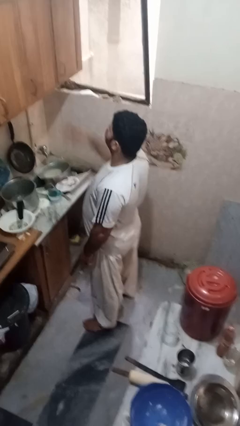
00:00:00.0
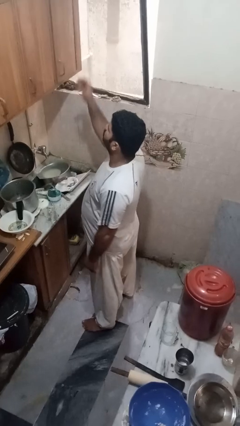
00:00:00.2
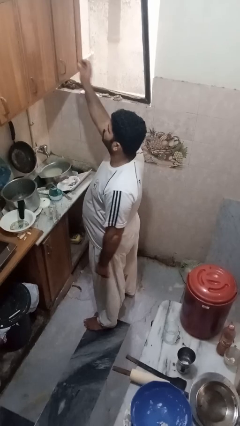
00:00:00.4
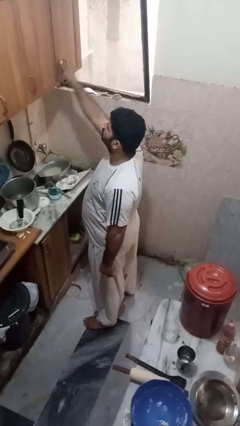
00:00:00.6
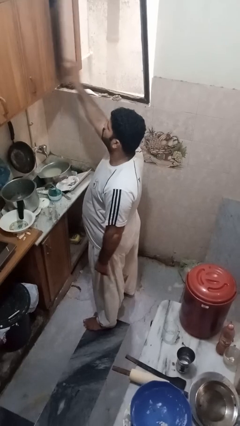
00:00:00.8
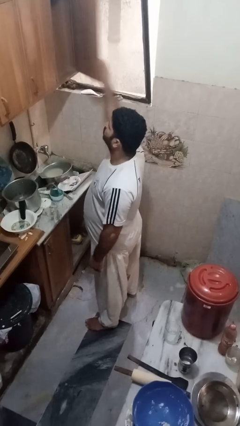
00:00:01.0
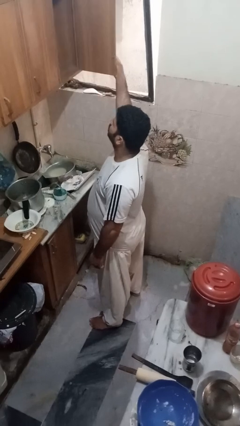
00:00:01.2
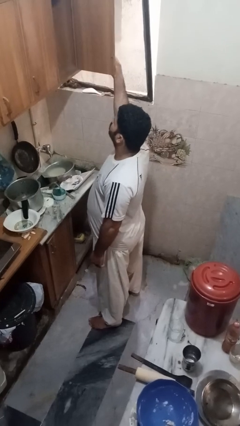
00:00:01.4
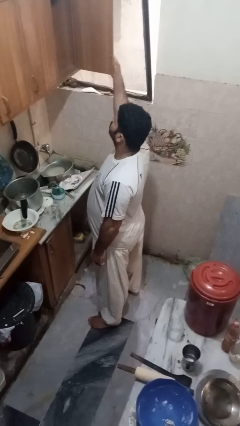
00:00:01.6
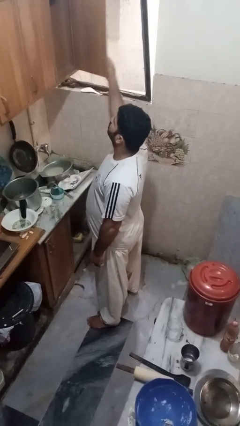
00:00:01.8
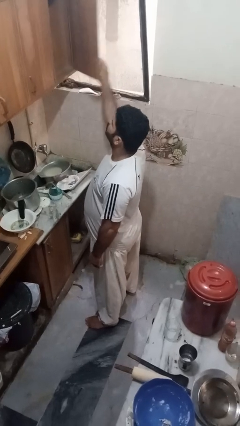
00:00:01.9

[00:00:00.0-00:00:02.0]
person opens cabinet

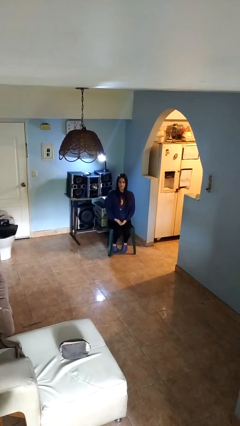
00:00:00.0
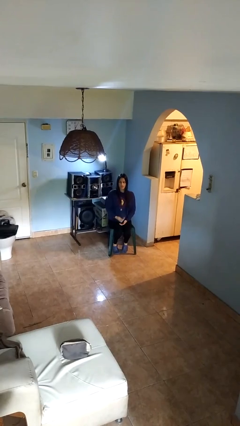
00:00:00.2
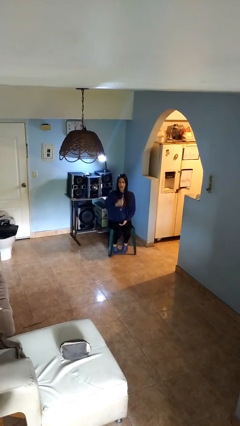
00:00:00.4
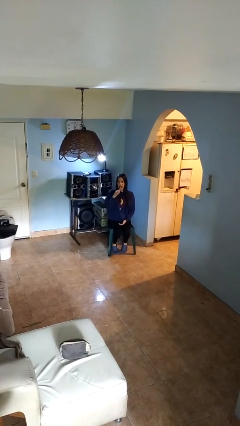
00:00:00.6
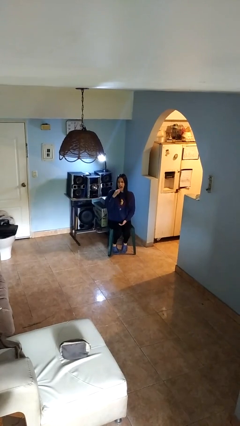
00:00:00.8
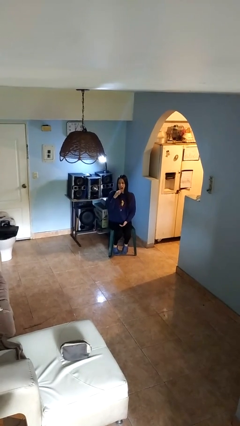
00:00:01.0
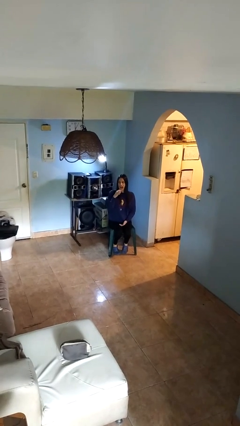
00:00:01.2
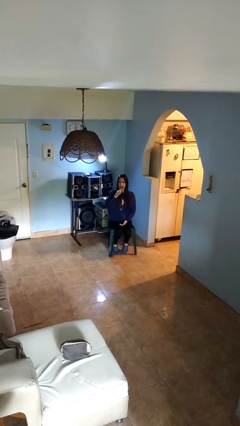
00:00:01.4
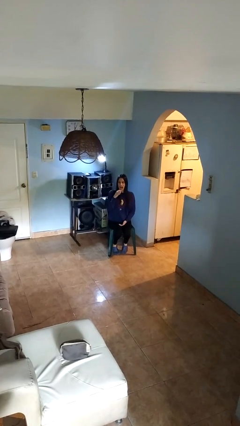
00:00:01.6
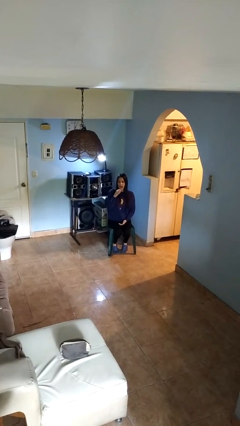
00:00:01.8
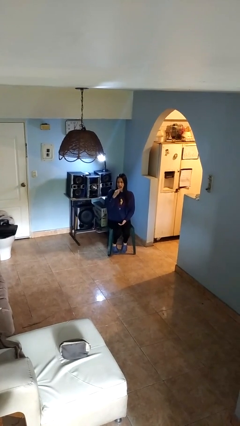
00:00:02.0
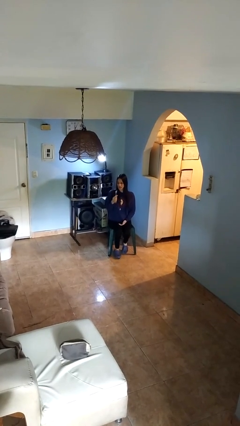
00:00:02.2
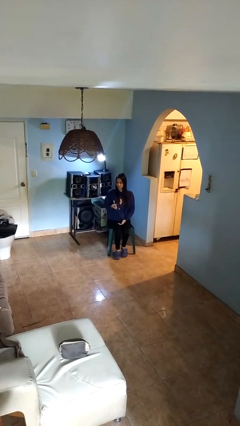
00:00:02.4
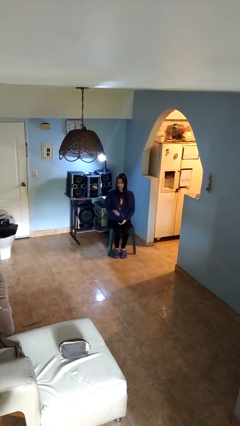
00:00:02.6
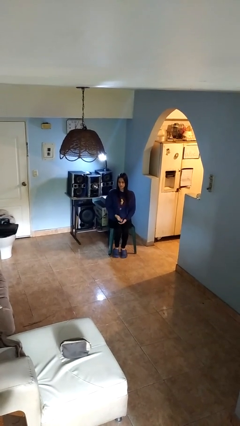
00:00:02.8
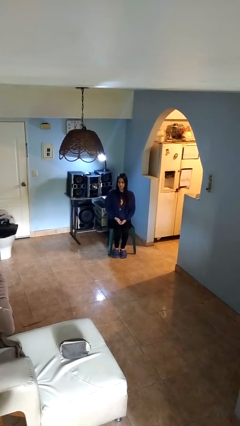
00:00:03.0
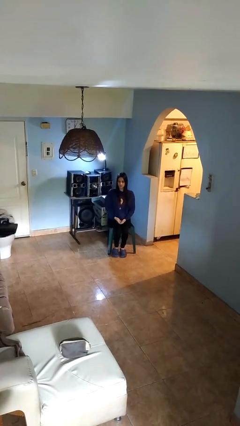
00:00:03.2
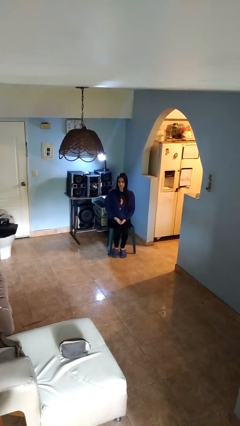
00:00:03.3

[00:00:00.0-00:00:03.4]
person brushes teeth

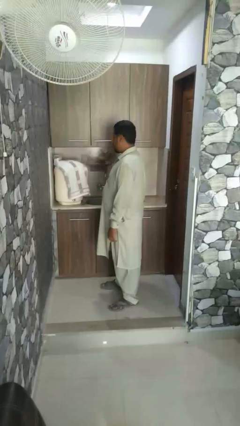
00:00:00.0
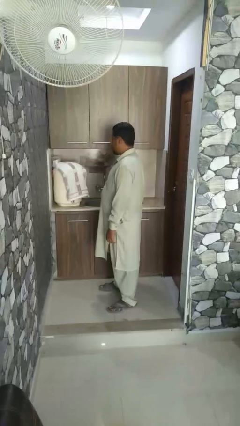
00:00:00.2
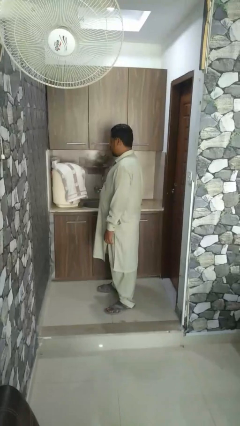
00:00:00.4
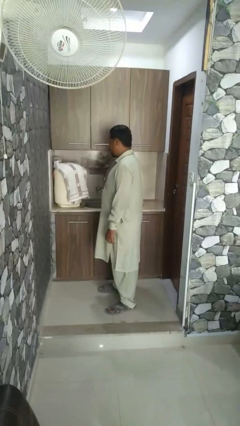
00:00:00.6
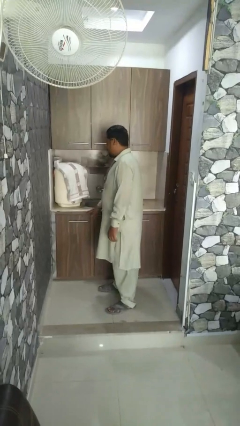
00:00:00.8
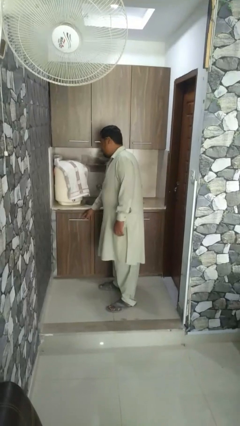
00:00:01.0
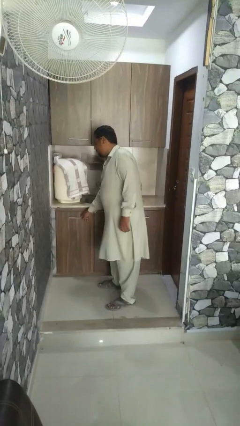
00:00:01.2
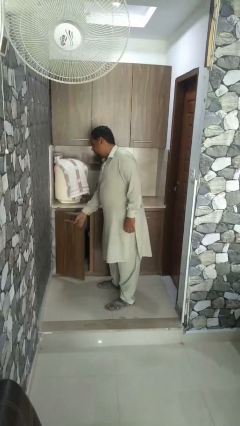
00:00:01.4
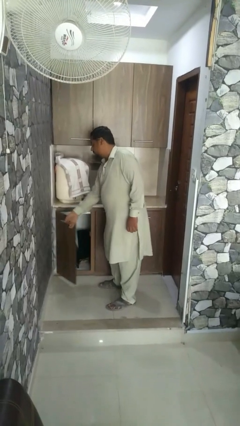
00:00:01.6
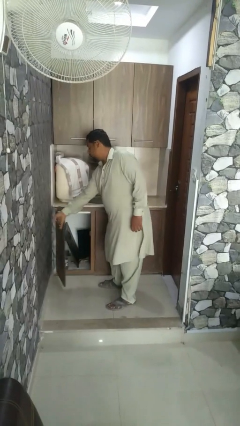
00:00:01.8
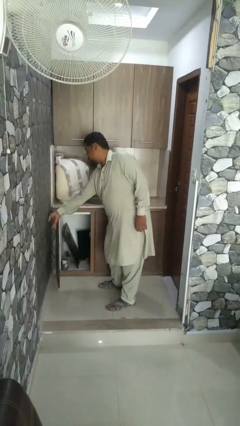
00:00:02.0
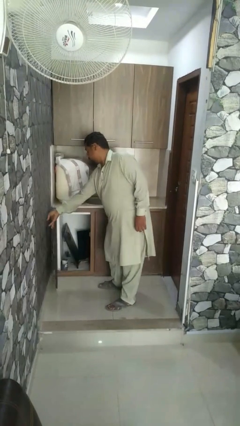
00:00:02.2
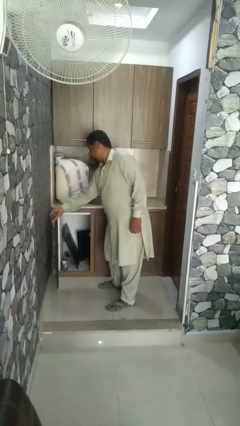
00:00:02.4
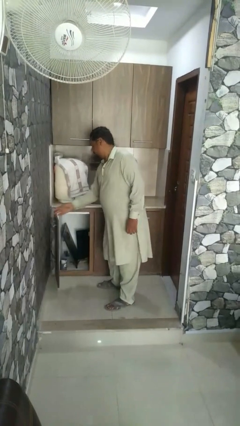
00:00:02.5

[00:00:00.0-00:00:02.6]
person opens refrigerator

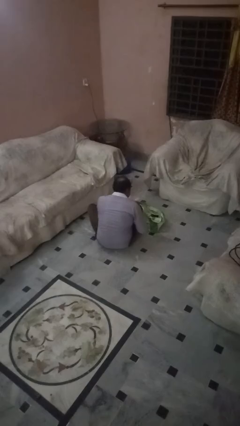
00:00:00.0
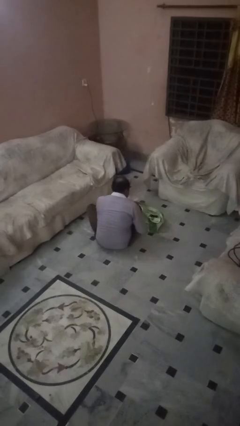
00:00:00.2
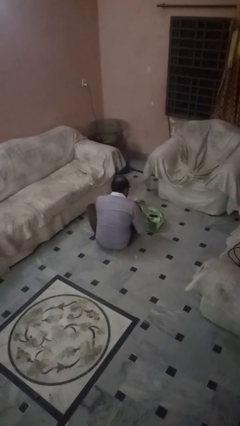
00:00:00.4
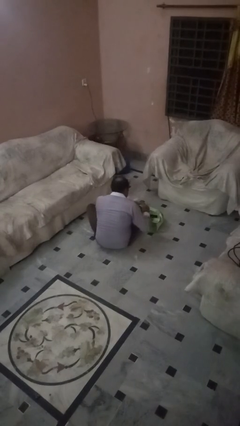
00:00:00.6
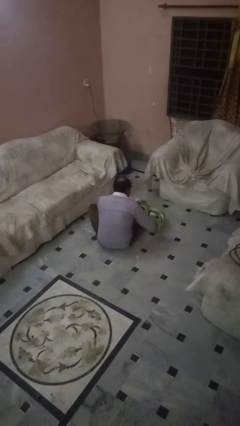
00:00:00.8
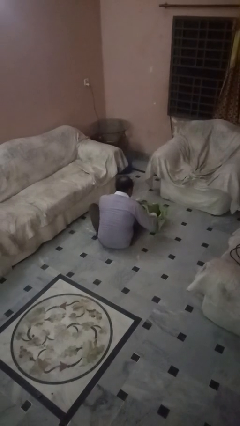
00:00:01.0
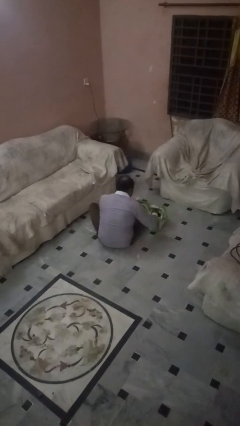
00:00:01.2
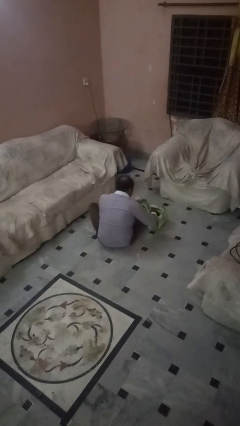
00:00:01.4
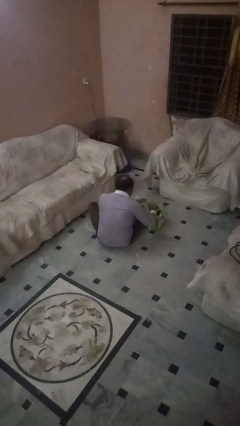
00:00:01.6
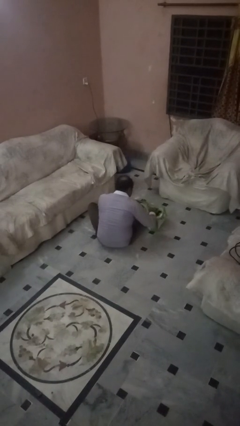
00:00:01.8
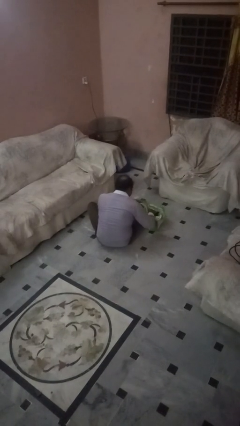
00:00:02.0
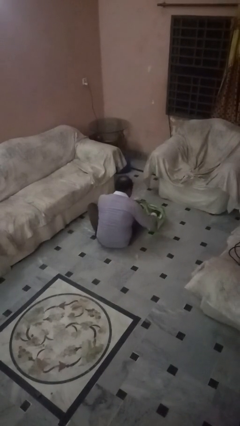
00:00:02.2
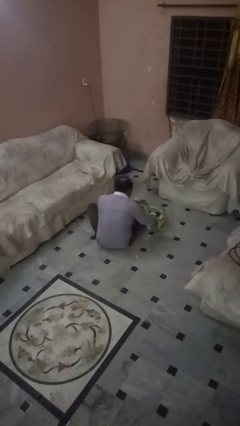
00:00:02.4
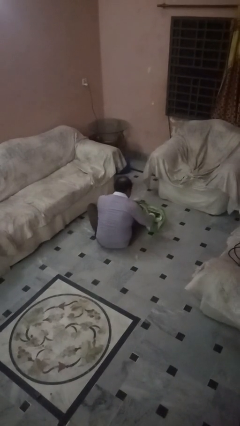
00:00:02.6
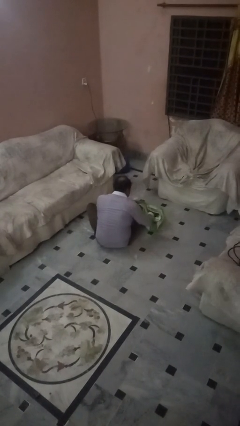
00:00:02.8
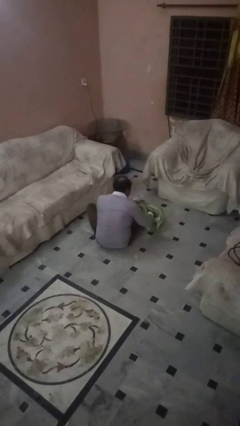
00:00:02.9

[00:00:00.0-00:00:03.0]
person searches in bag

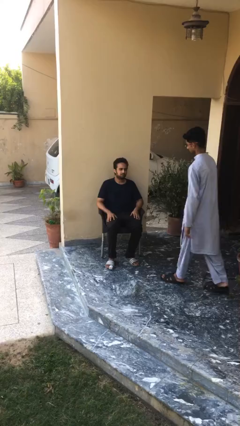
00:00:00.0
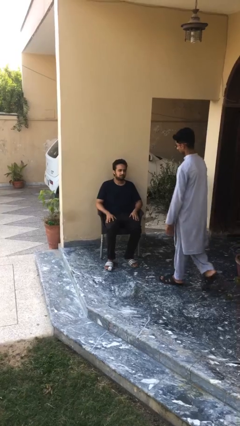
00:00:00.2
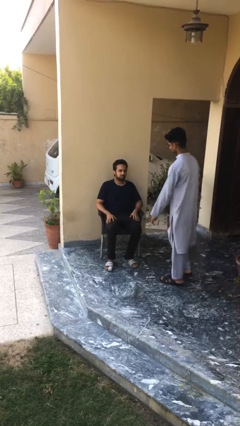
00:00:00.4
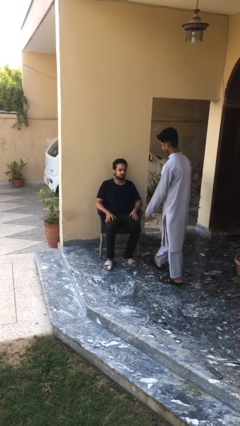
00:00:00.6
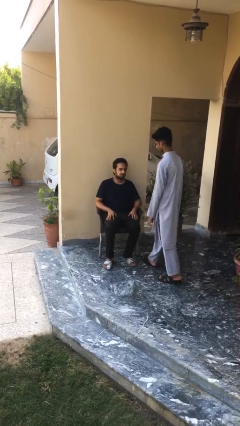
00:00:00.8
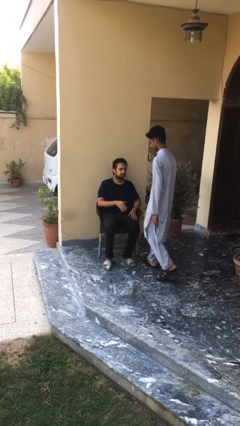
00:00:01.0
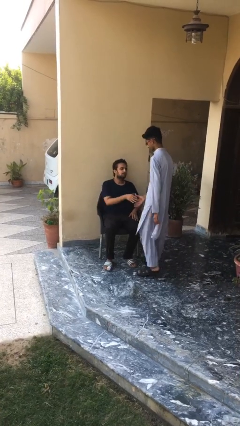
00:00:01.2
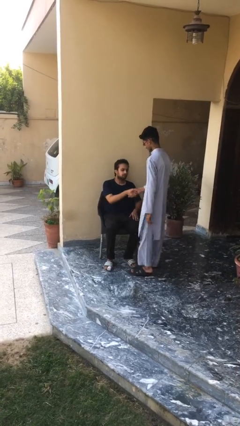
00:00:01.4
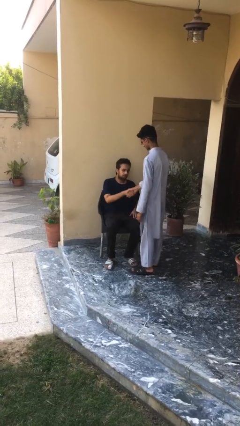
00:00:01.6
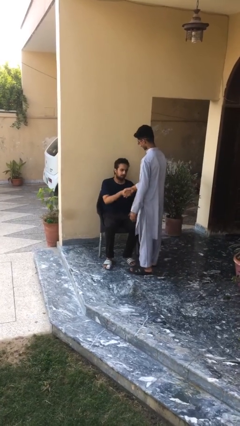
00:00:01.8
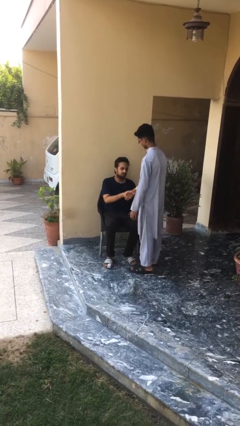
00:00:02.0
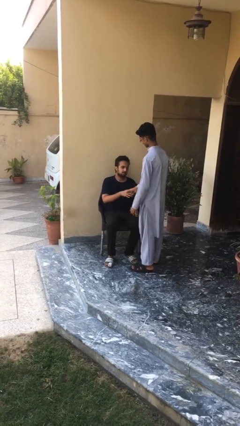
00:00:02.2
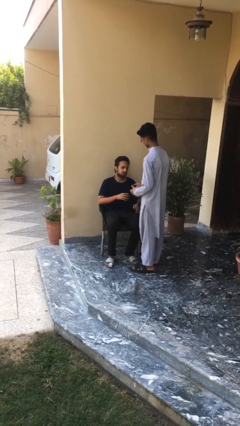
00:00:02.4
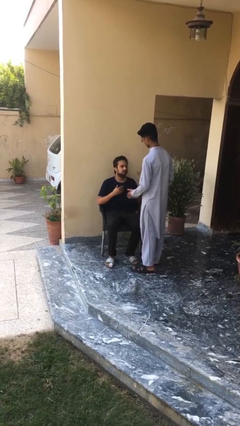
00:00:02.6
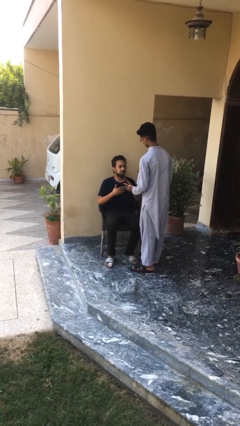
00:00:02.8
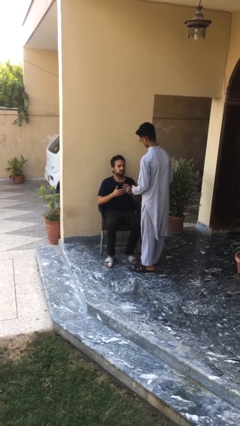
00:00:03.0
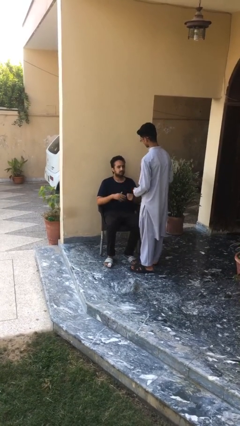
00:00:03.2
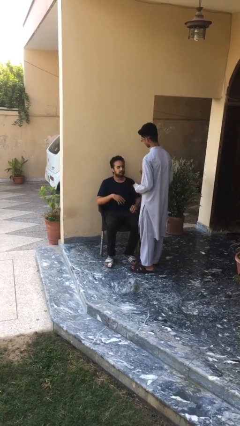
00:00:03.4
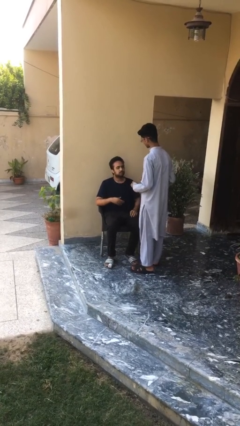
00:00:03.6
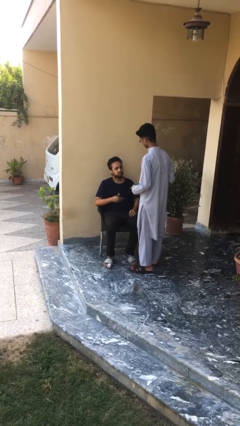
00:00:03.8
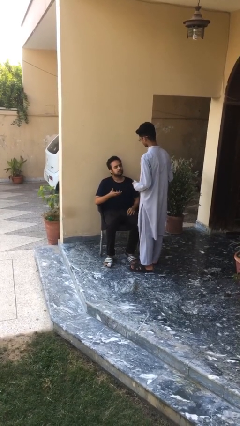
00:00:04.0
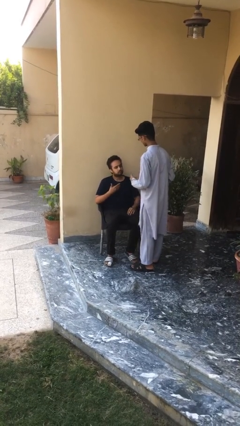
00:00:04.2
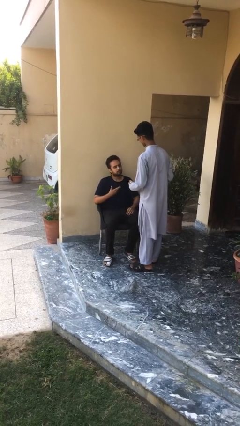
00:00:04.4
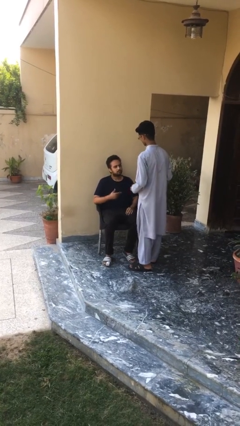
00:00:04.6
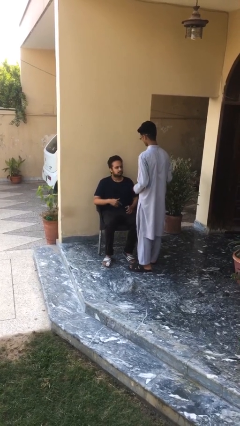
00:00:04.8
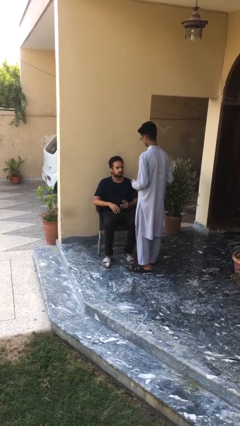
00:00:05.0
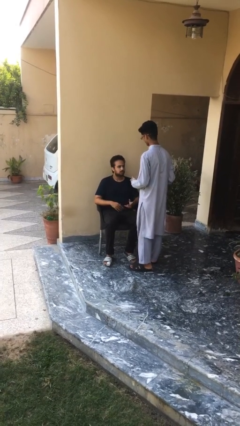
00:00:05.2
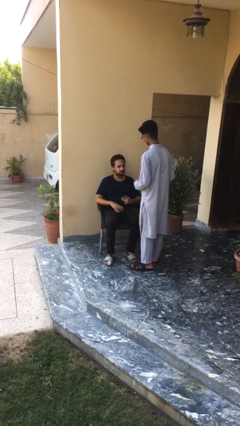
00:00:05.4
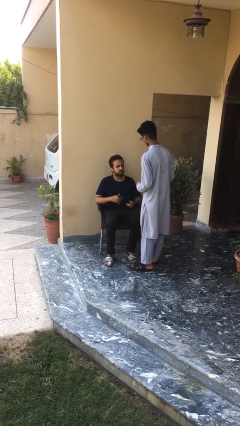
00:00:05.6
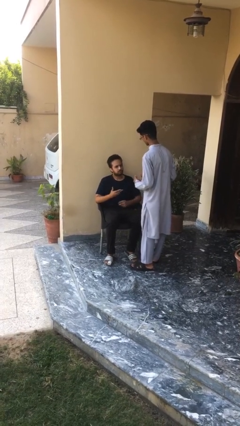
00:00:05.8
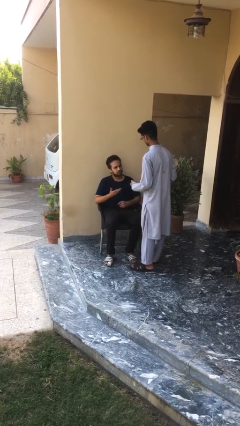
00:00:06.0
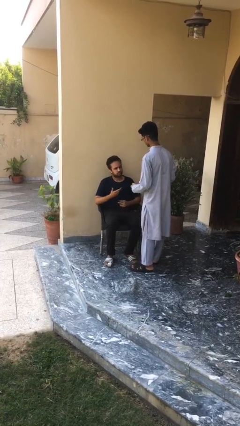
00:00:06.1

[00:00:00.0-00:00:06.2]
person shakes hand

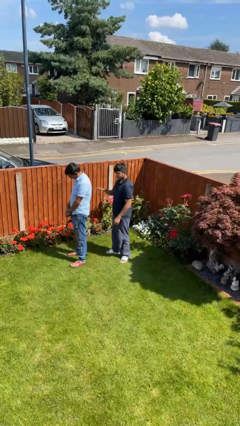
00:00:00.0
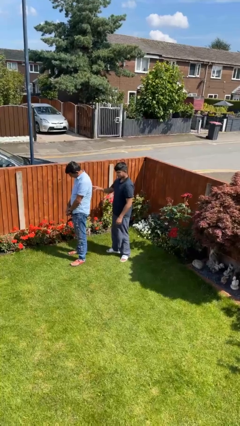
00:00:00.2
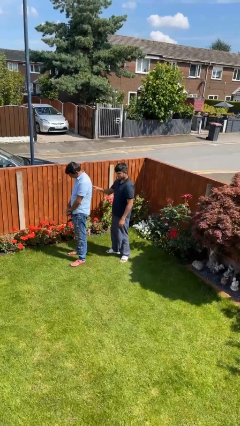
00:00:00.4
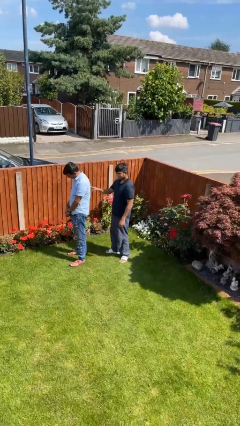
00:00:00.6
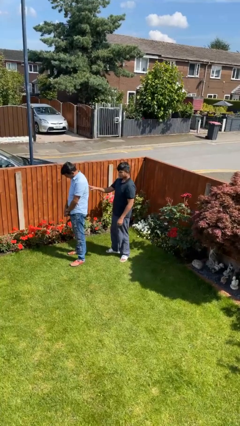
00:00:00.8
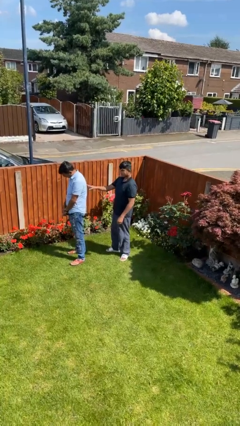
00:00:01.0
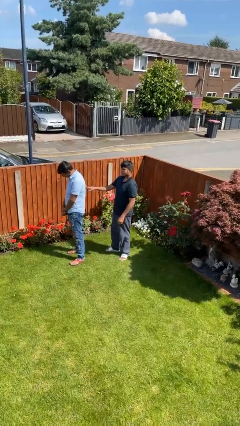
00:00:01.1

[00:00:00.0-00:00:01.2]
person touches back of person
